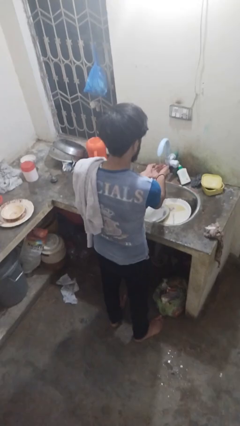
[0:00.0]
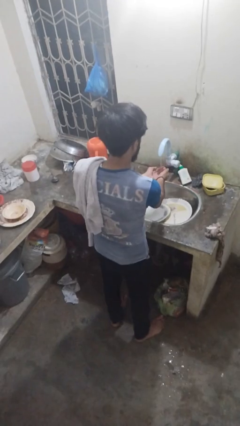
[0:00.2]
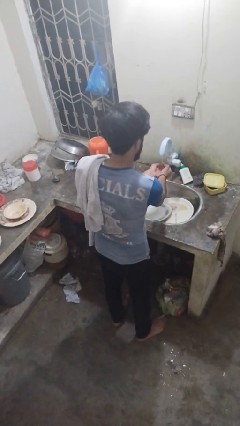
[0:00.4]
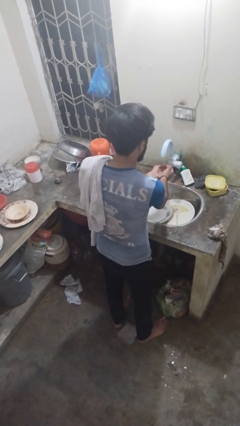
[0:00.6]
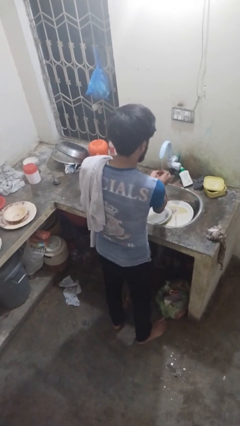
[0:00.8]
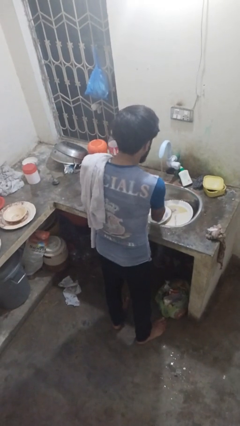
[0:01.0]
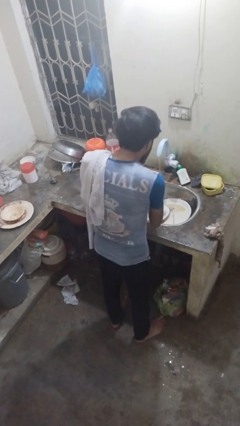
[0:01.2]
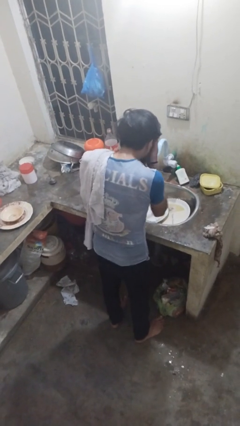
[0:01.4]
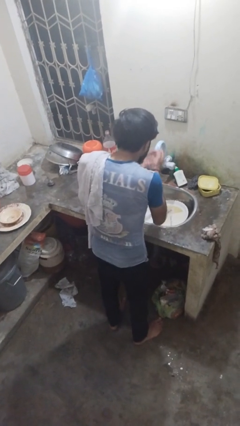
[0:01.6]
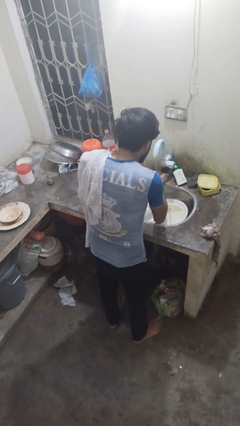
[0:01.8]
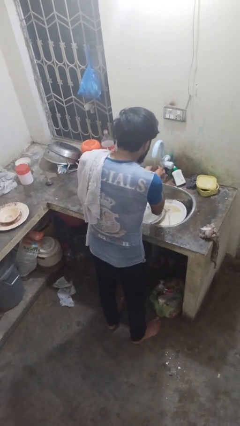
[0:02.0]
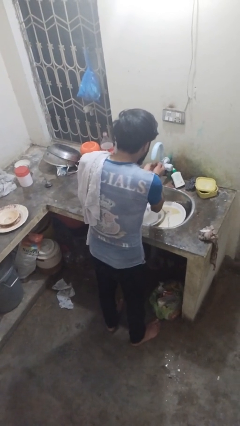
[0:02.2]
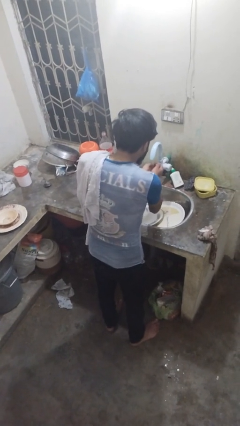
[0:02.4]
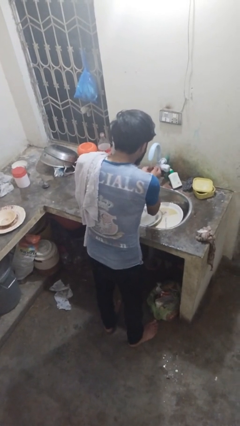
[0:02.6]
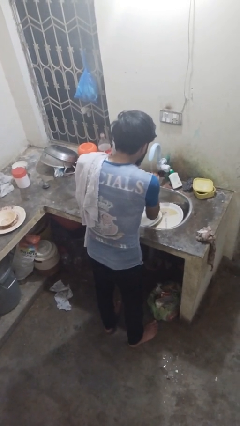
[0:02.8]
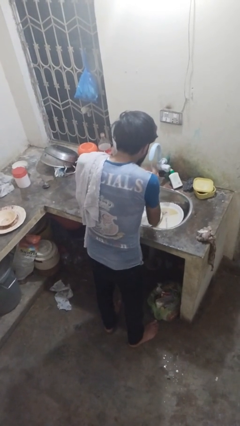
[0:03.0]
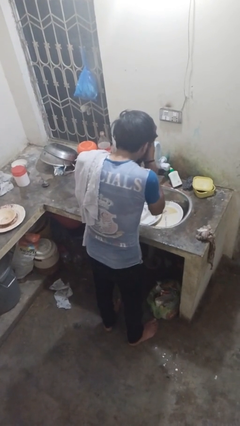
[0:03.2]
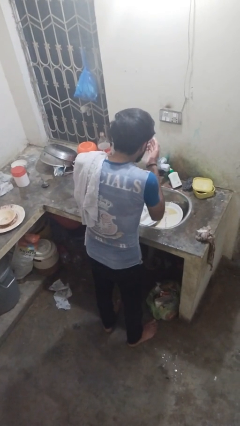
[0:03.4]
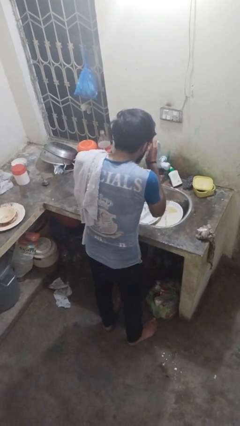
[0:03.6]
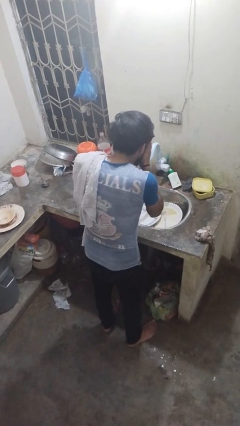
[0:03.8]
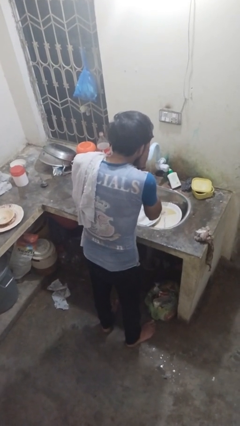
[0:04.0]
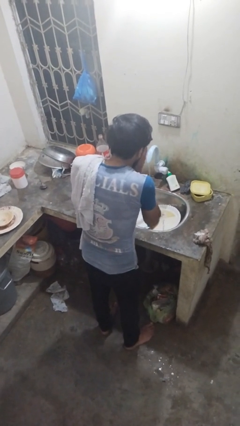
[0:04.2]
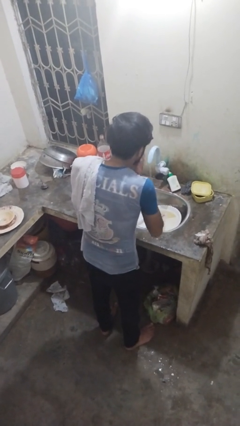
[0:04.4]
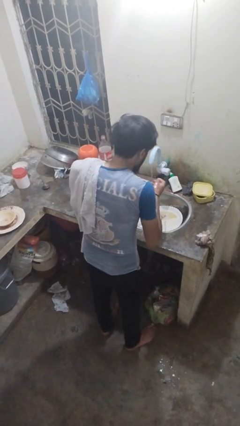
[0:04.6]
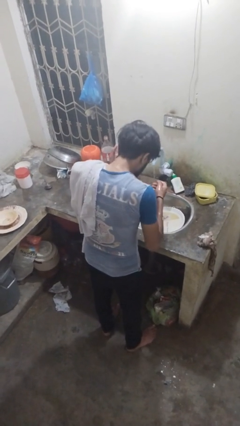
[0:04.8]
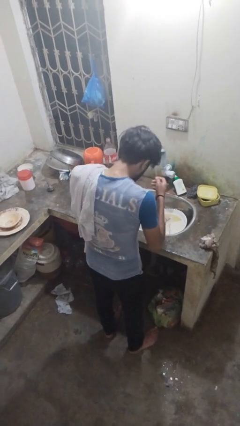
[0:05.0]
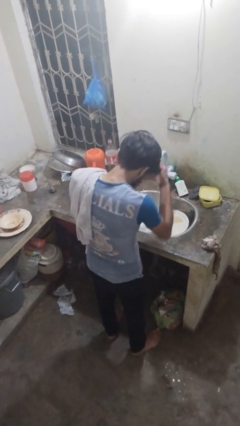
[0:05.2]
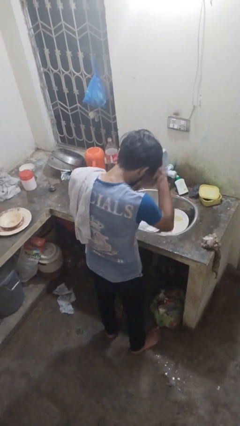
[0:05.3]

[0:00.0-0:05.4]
person washes face

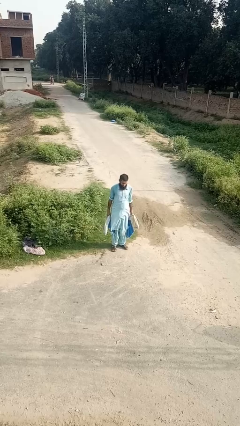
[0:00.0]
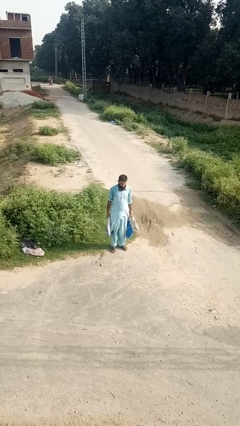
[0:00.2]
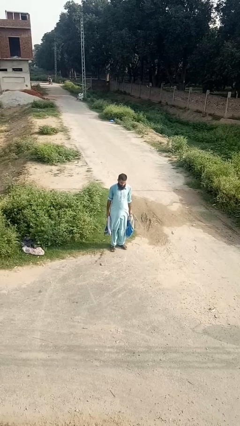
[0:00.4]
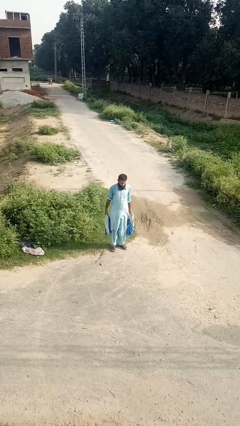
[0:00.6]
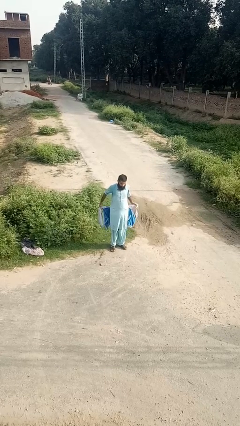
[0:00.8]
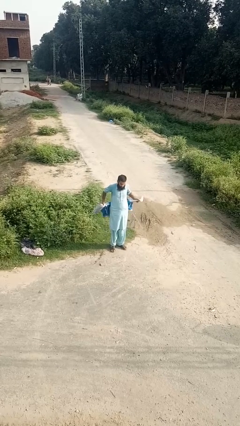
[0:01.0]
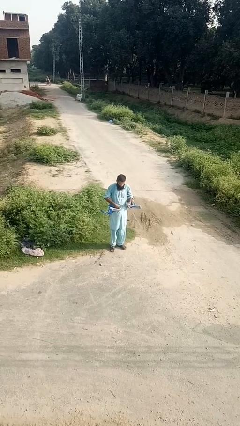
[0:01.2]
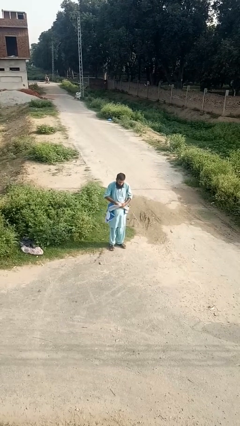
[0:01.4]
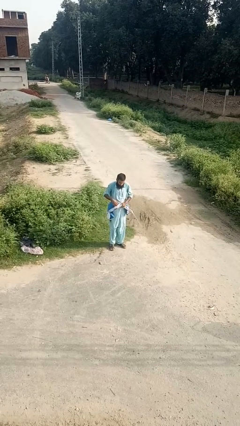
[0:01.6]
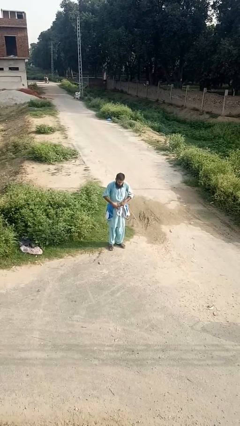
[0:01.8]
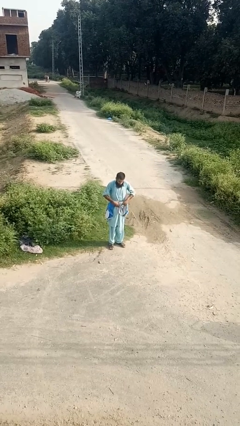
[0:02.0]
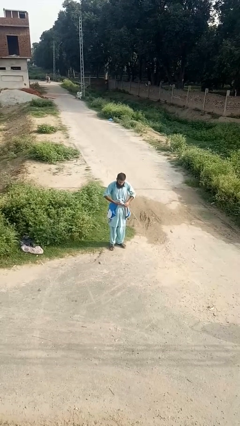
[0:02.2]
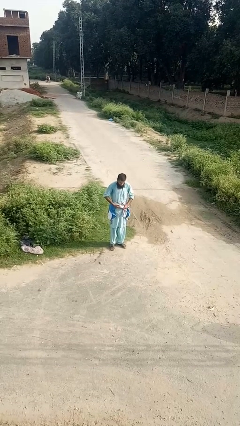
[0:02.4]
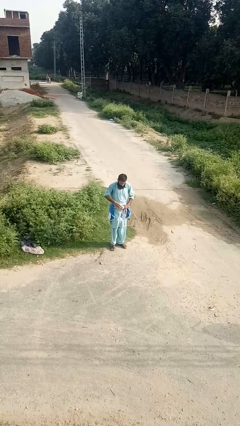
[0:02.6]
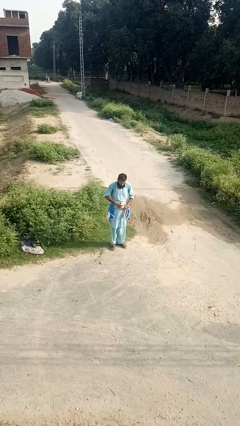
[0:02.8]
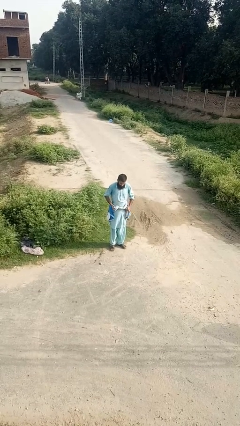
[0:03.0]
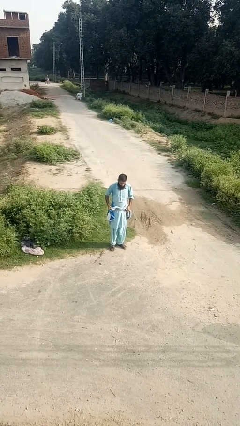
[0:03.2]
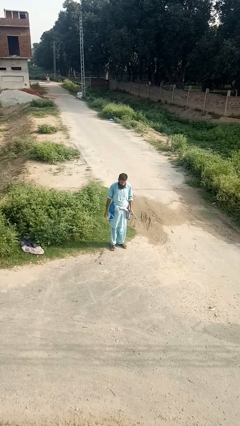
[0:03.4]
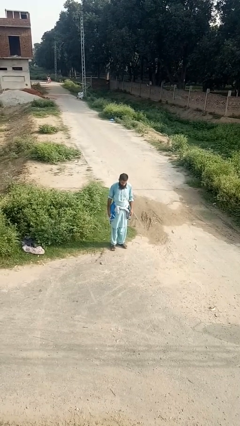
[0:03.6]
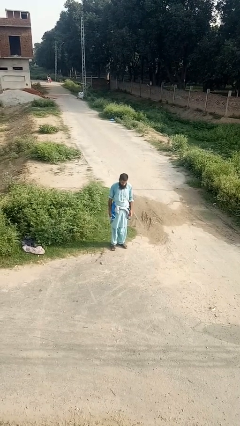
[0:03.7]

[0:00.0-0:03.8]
person ties jacket around waist

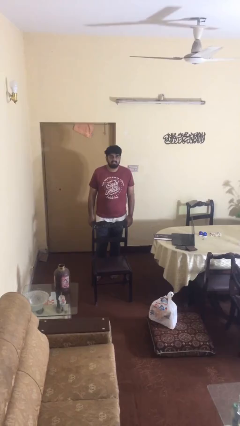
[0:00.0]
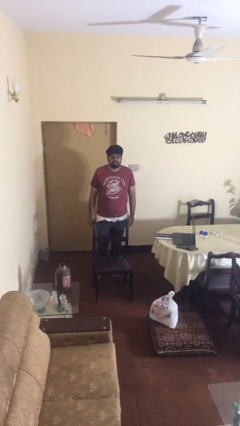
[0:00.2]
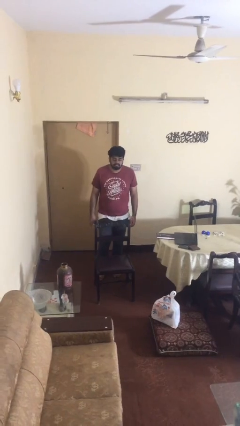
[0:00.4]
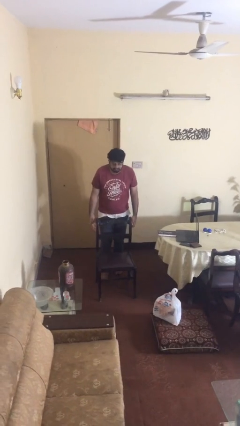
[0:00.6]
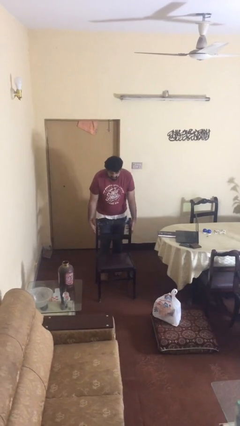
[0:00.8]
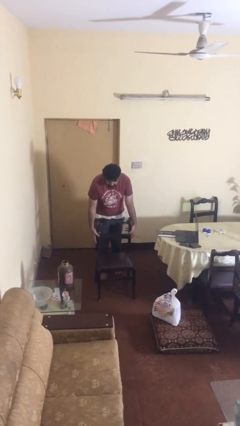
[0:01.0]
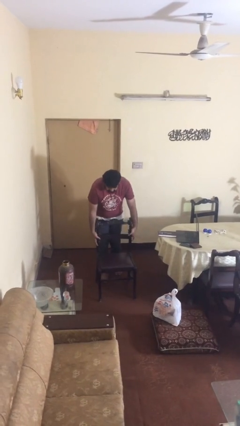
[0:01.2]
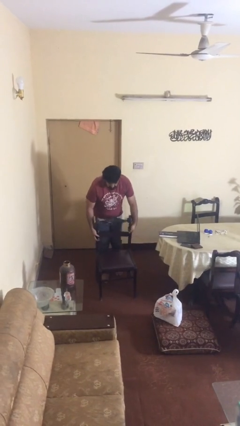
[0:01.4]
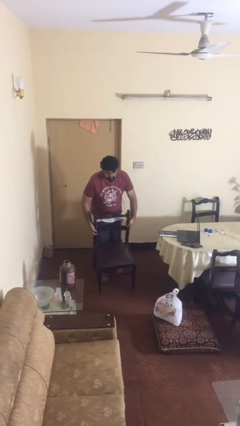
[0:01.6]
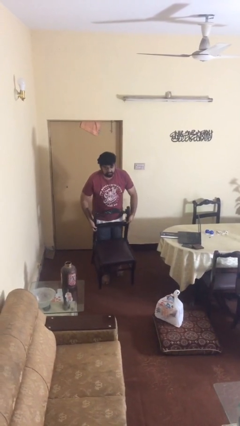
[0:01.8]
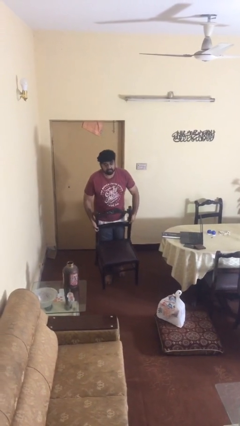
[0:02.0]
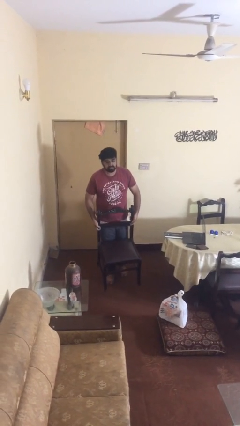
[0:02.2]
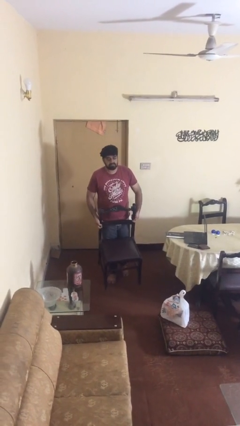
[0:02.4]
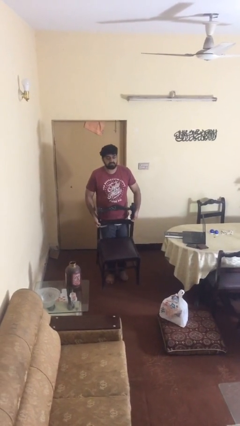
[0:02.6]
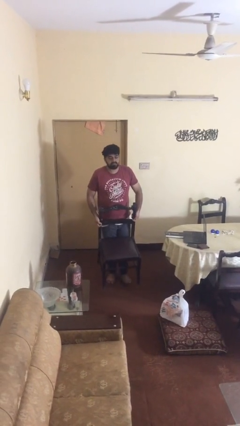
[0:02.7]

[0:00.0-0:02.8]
person picks up object from floor

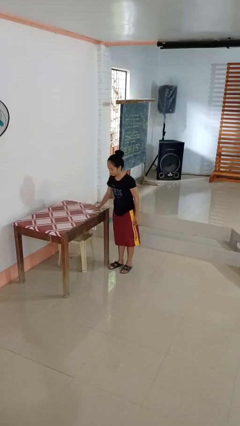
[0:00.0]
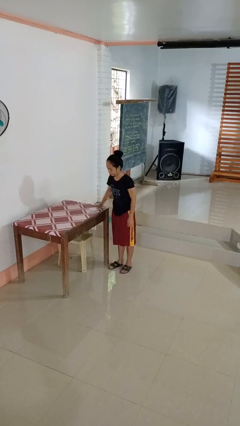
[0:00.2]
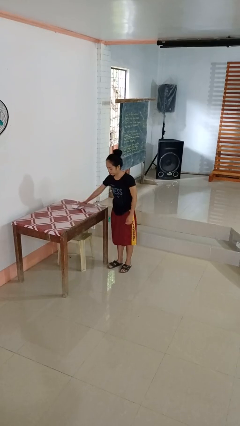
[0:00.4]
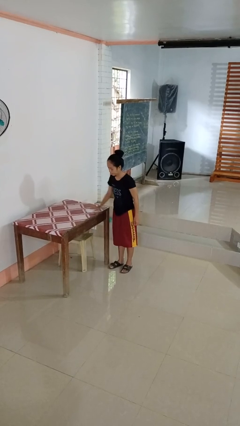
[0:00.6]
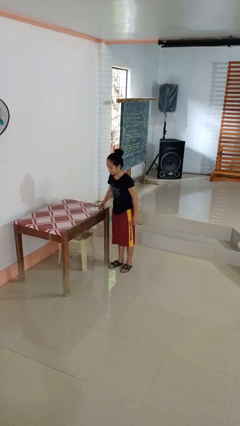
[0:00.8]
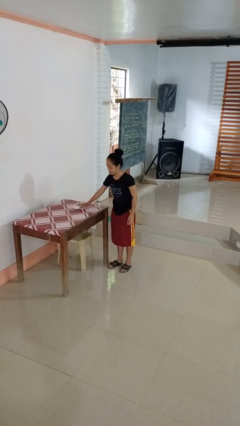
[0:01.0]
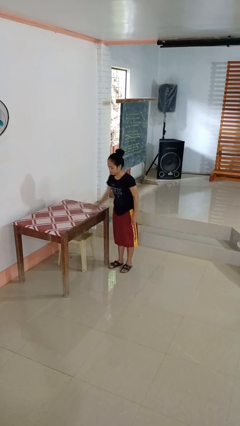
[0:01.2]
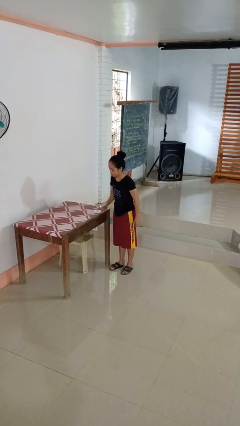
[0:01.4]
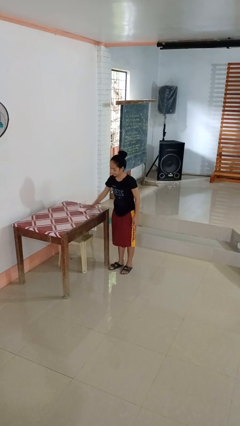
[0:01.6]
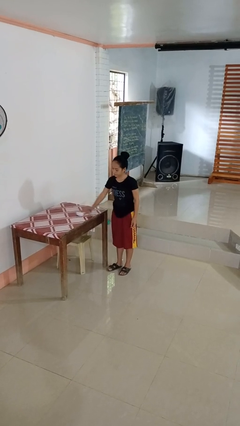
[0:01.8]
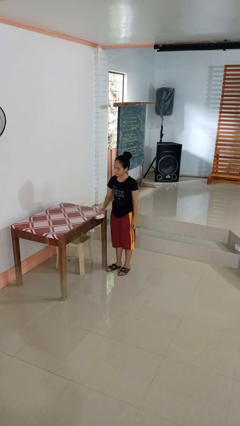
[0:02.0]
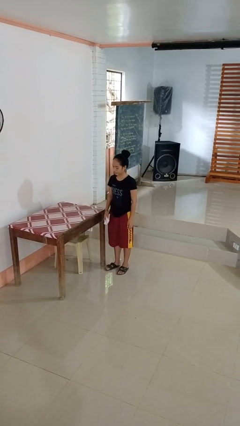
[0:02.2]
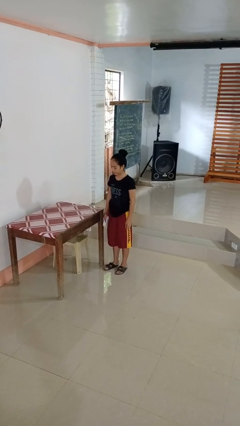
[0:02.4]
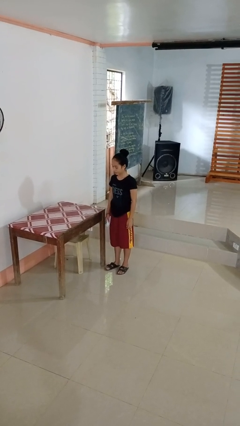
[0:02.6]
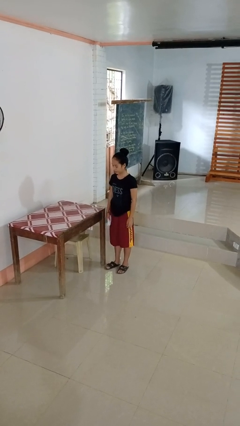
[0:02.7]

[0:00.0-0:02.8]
person cleans table with rag

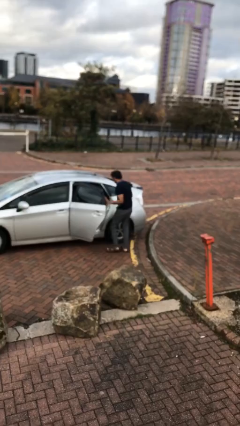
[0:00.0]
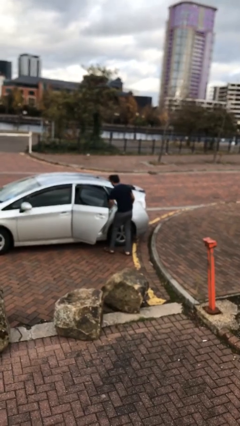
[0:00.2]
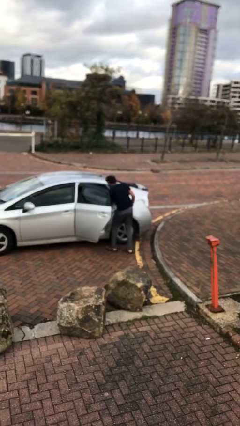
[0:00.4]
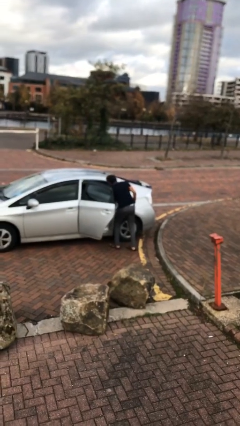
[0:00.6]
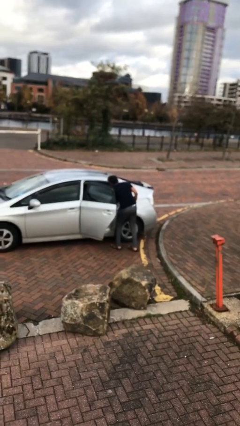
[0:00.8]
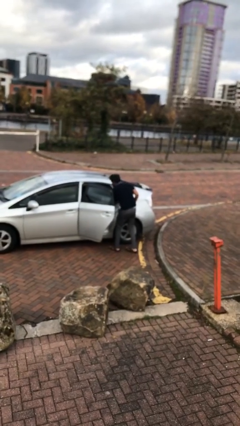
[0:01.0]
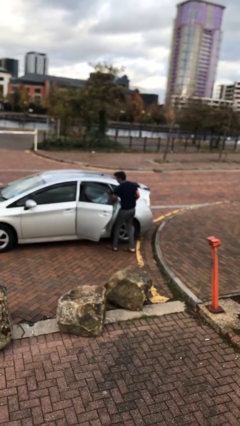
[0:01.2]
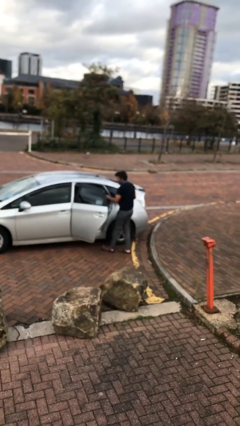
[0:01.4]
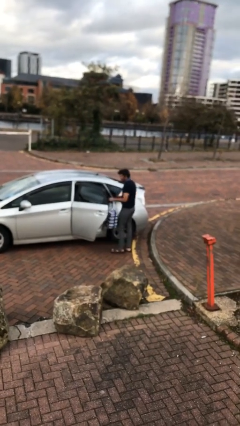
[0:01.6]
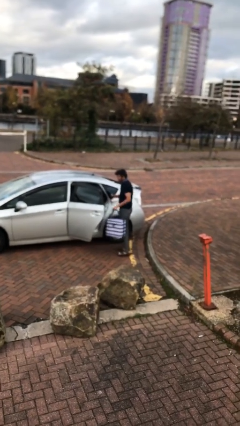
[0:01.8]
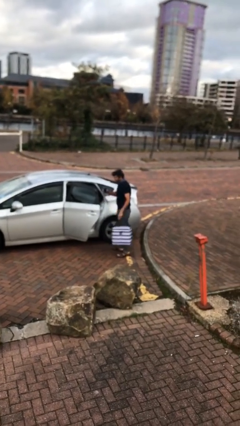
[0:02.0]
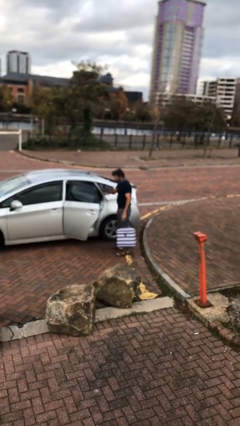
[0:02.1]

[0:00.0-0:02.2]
person unloads car

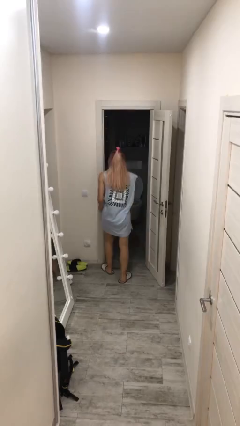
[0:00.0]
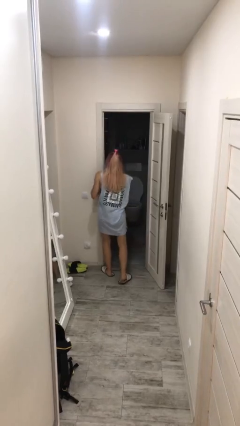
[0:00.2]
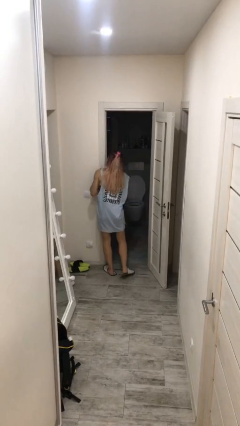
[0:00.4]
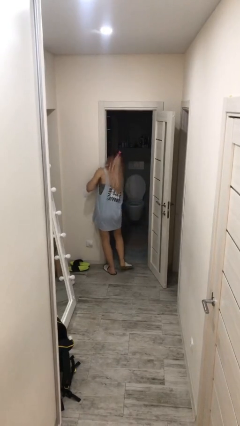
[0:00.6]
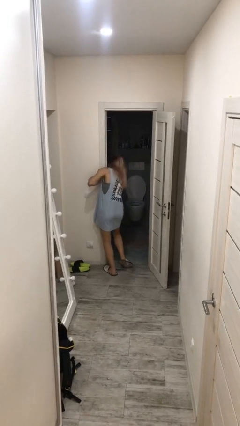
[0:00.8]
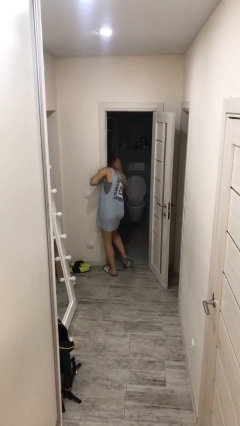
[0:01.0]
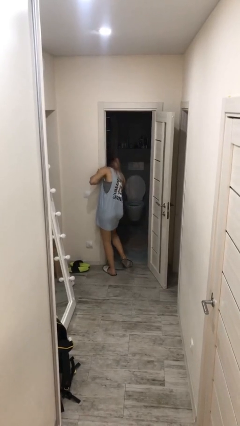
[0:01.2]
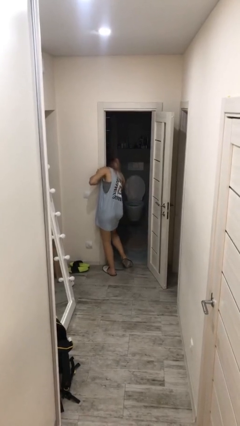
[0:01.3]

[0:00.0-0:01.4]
person bumps into wall
